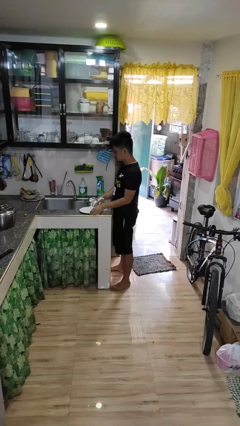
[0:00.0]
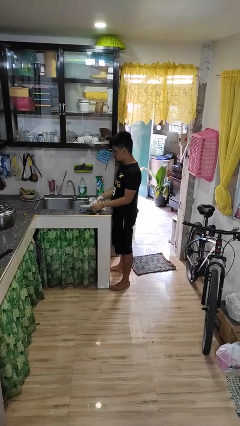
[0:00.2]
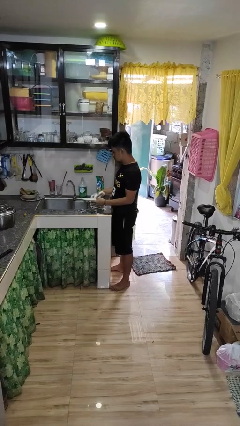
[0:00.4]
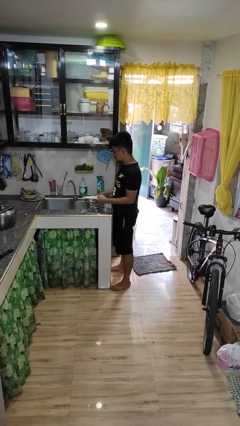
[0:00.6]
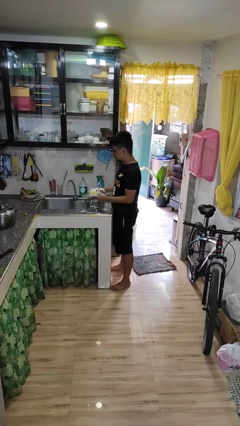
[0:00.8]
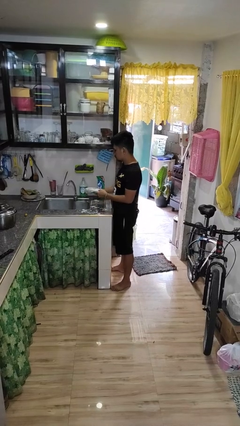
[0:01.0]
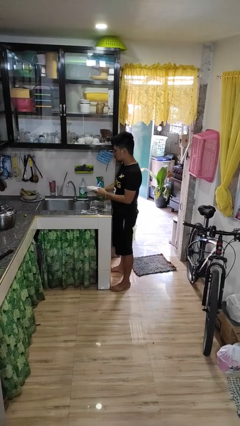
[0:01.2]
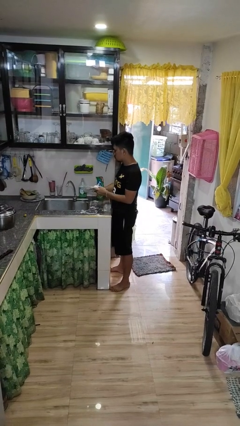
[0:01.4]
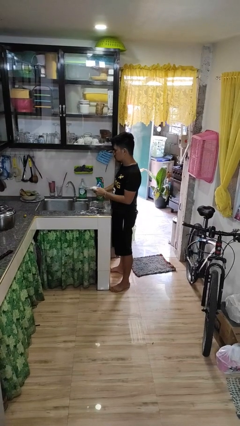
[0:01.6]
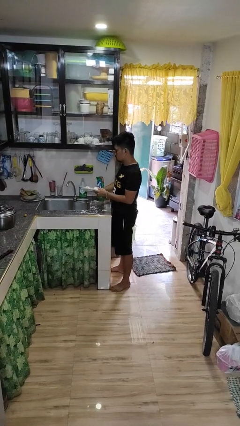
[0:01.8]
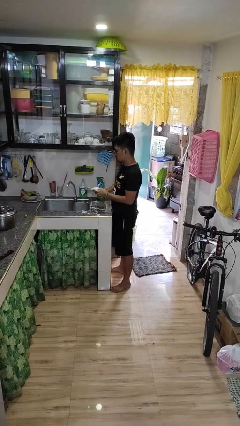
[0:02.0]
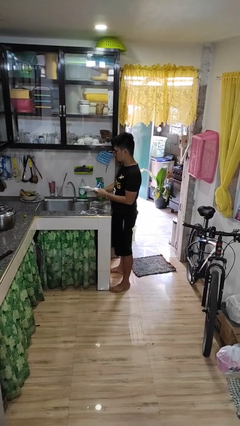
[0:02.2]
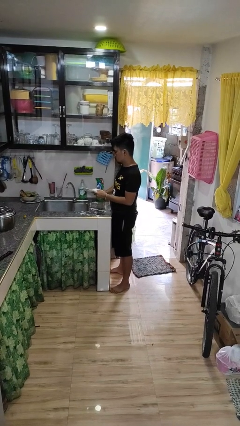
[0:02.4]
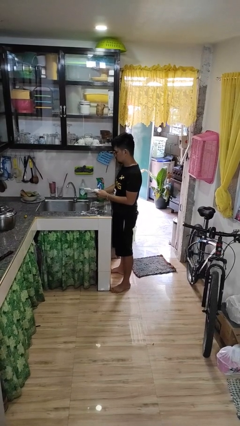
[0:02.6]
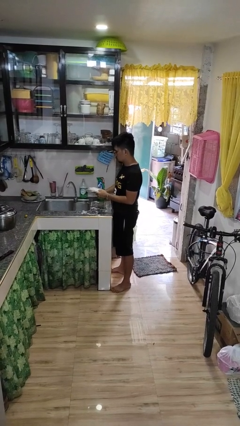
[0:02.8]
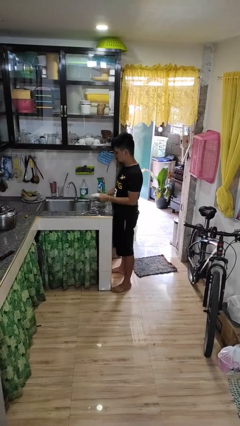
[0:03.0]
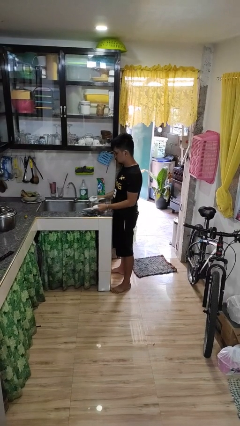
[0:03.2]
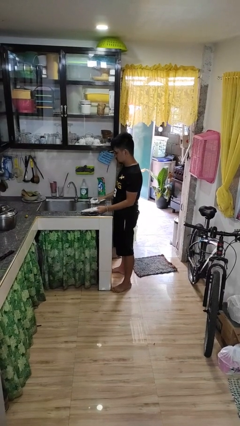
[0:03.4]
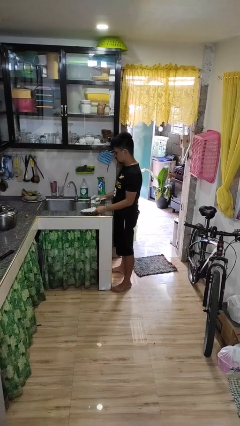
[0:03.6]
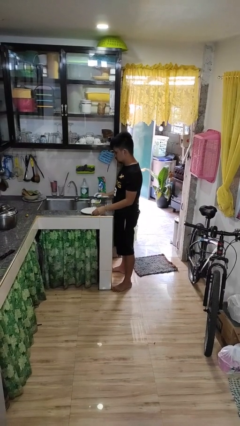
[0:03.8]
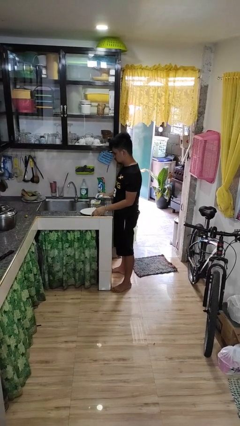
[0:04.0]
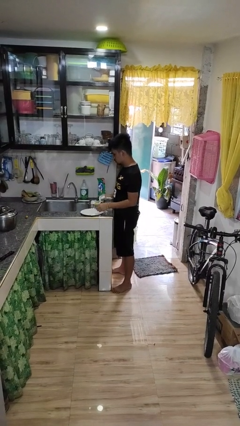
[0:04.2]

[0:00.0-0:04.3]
person washes dish

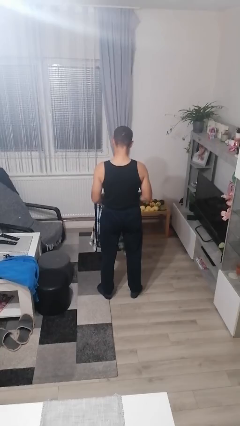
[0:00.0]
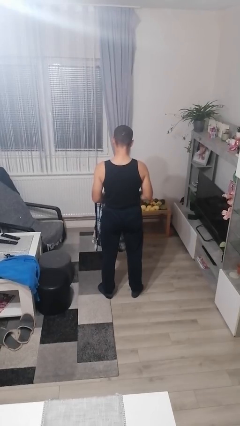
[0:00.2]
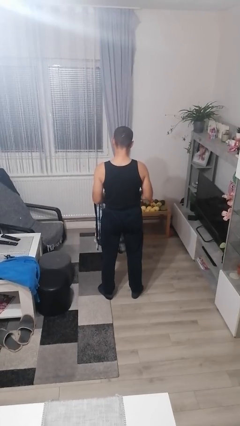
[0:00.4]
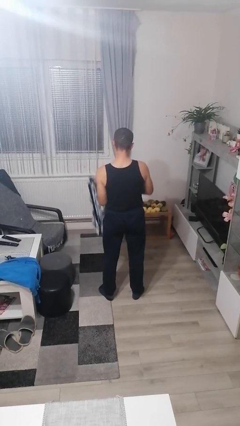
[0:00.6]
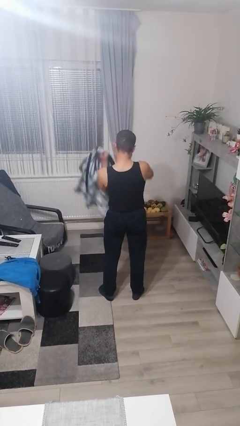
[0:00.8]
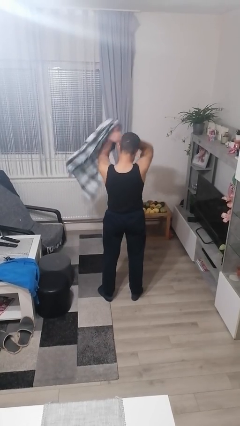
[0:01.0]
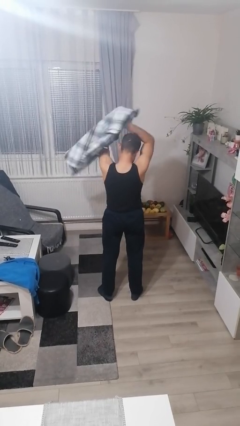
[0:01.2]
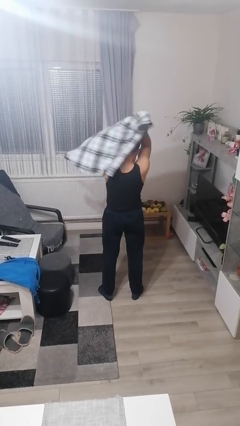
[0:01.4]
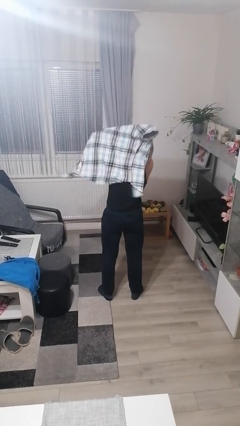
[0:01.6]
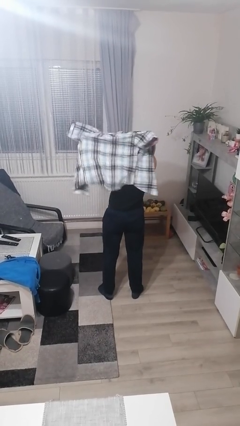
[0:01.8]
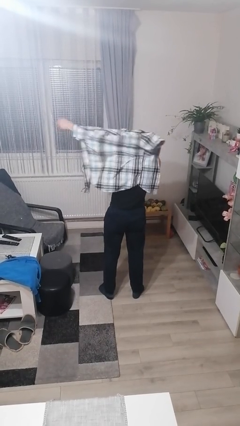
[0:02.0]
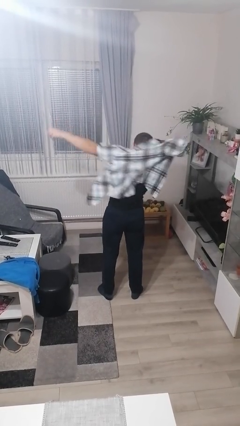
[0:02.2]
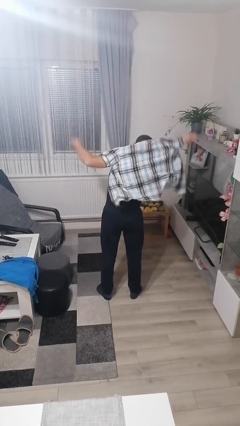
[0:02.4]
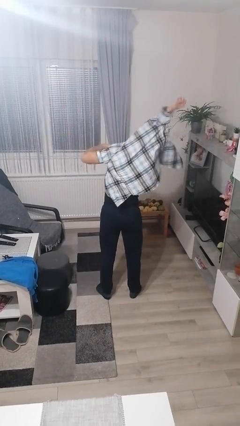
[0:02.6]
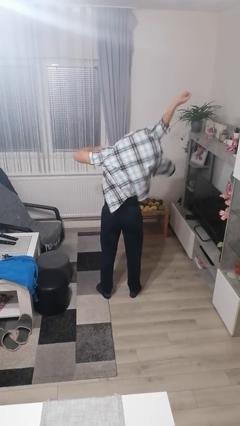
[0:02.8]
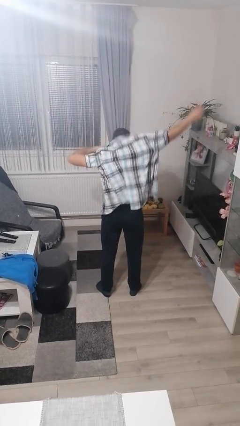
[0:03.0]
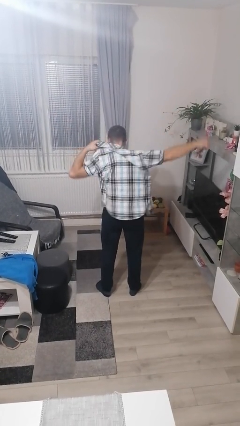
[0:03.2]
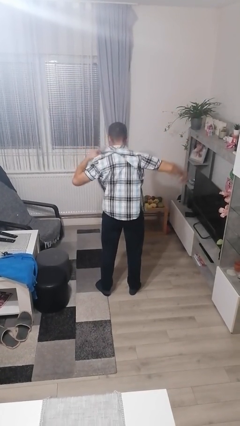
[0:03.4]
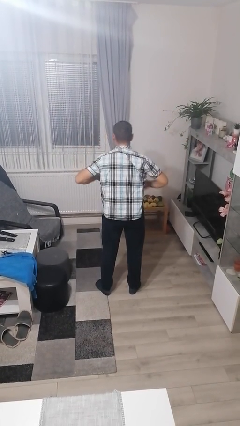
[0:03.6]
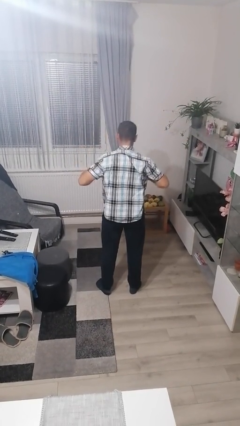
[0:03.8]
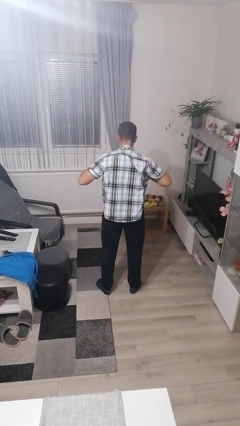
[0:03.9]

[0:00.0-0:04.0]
person puts on shirt

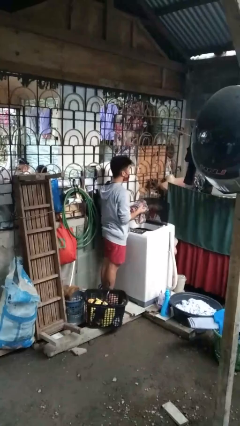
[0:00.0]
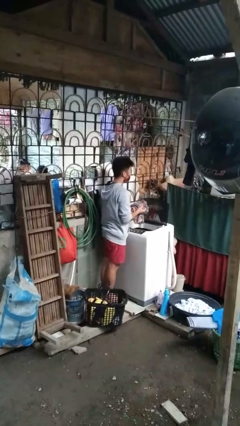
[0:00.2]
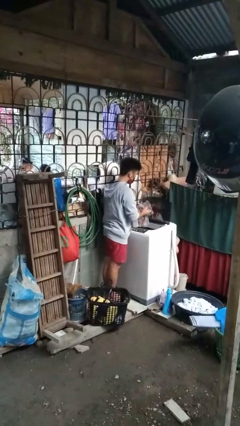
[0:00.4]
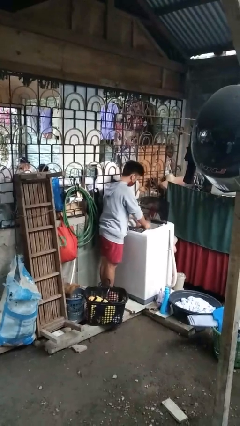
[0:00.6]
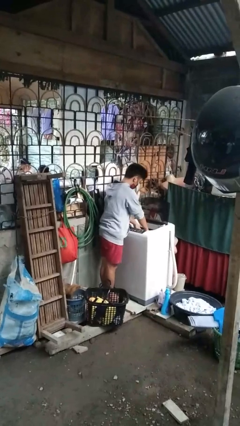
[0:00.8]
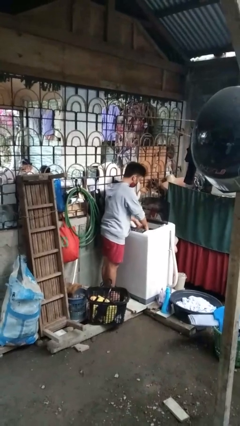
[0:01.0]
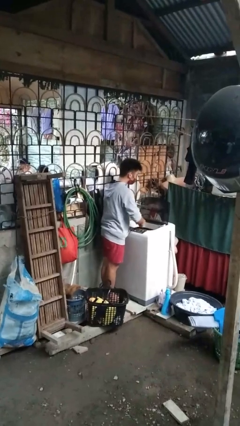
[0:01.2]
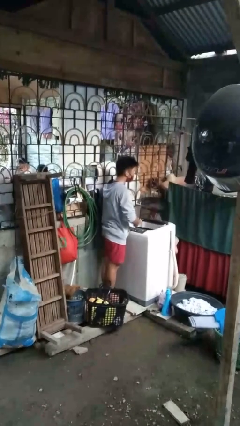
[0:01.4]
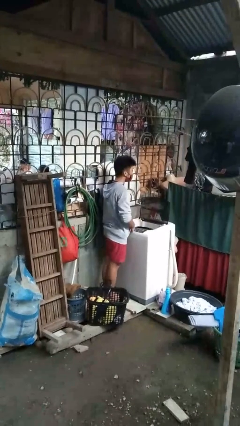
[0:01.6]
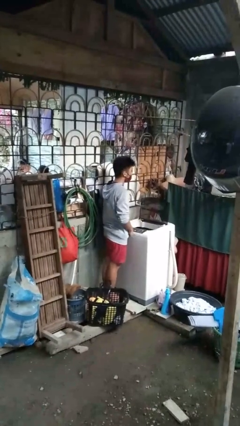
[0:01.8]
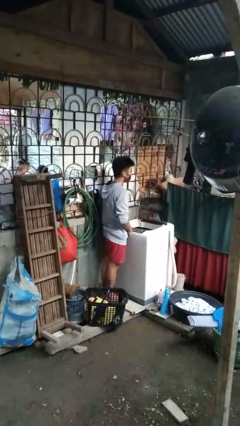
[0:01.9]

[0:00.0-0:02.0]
person loads dryer

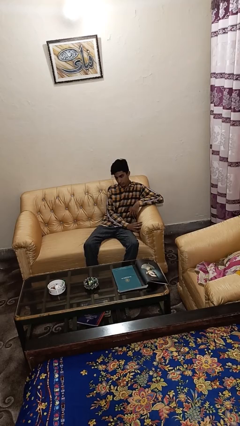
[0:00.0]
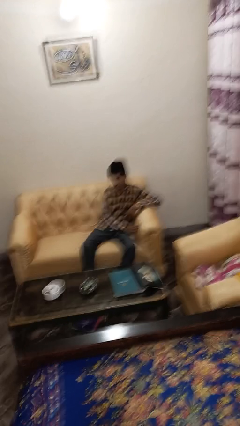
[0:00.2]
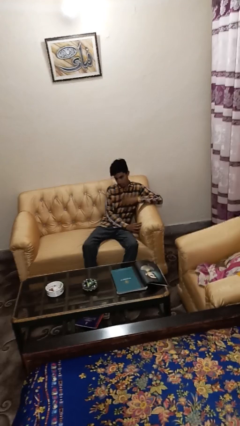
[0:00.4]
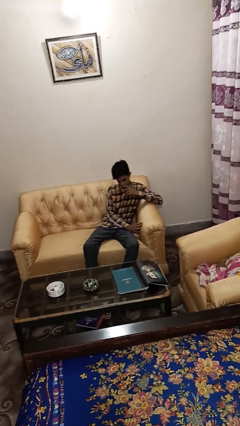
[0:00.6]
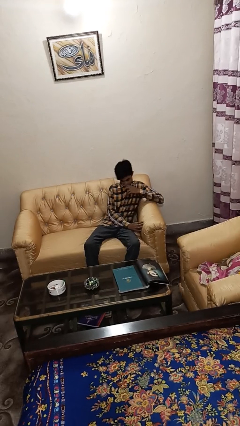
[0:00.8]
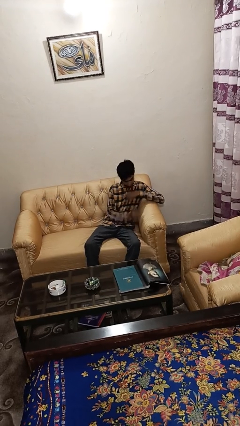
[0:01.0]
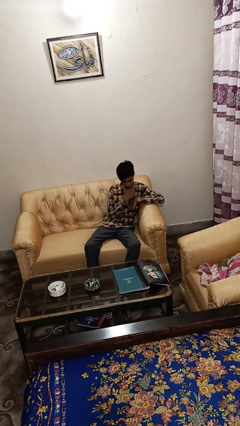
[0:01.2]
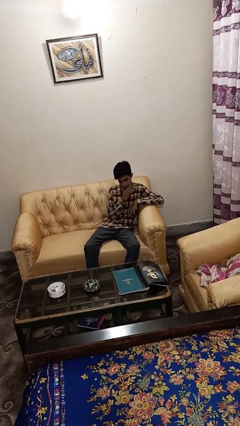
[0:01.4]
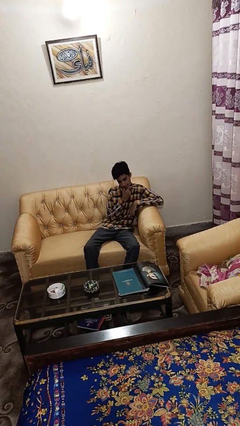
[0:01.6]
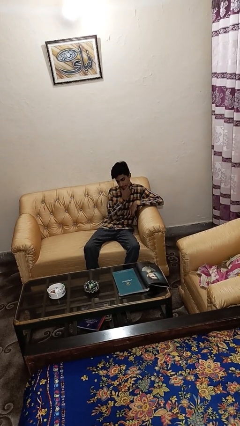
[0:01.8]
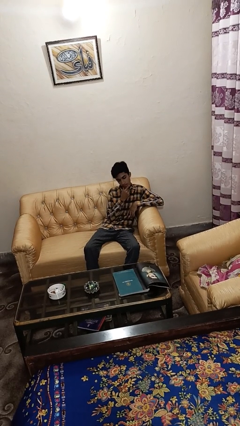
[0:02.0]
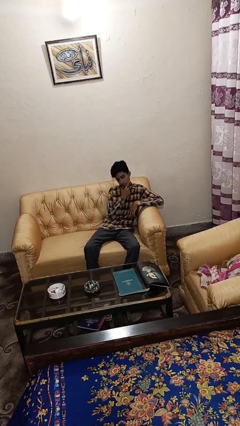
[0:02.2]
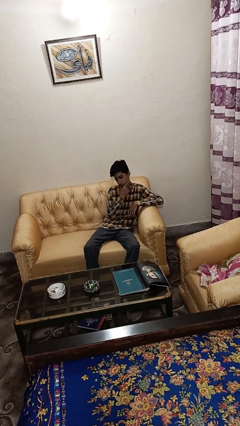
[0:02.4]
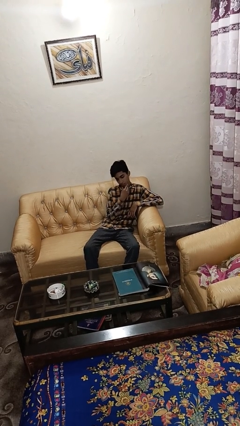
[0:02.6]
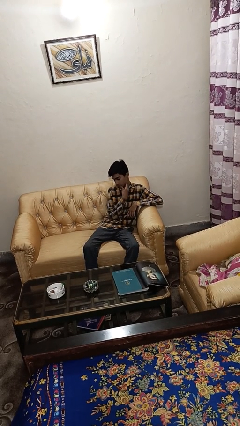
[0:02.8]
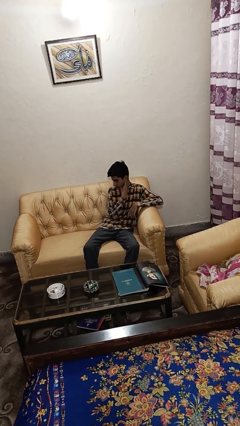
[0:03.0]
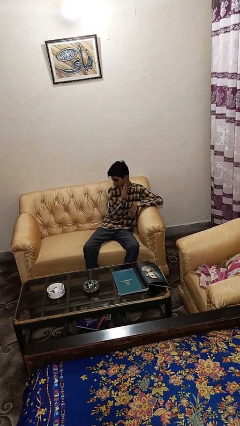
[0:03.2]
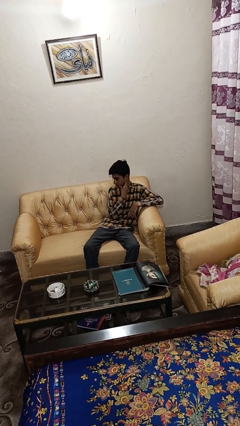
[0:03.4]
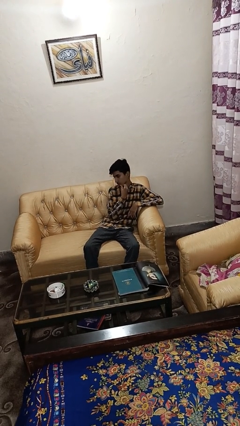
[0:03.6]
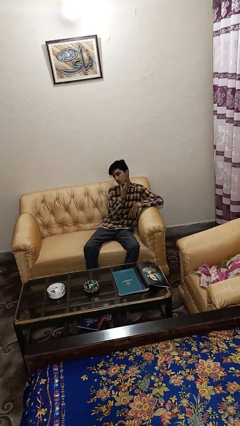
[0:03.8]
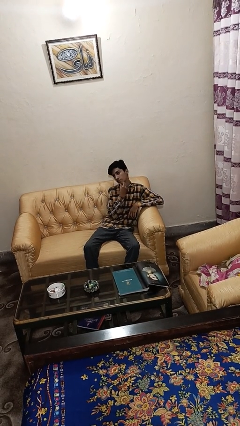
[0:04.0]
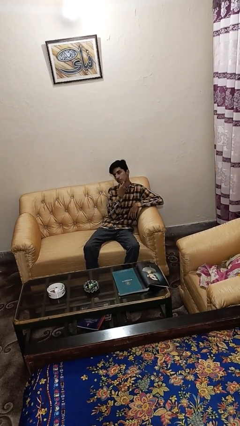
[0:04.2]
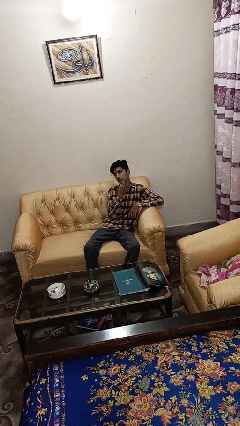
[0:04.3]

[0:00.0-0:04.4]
person strokes chin

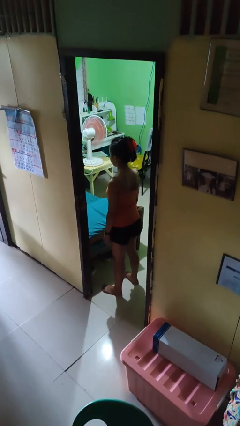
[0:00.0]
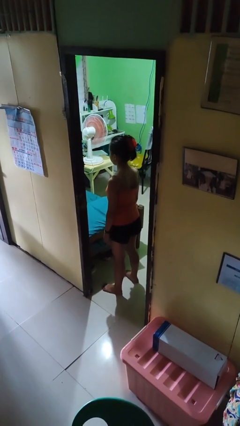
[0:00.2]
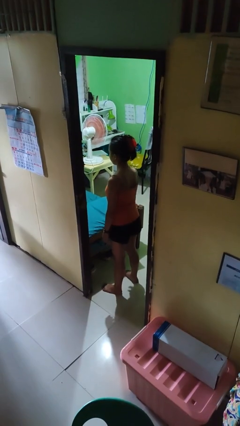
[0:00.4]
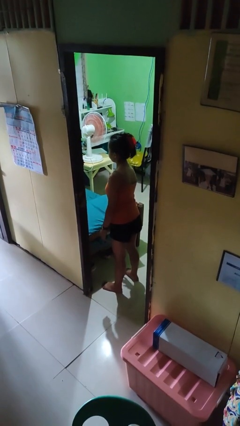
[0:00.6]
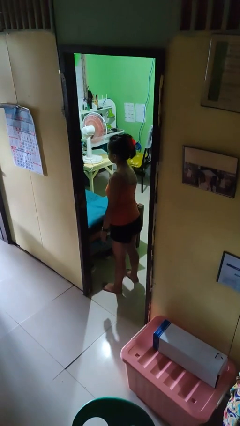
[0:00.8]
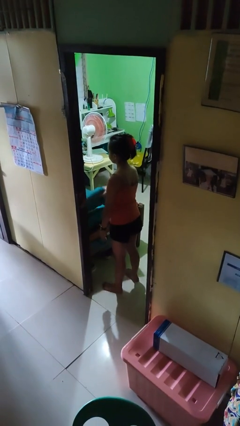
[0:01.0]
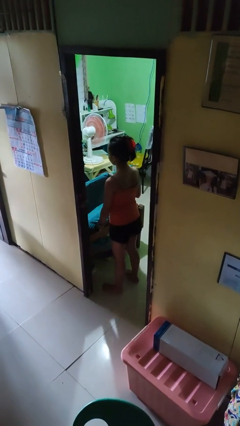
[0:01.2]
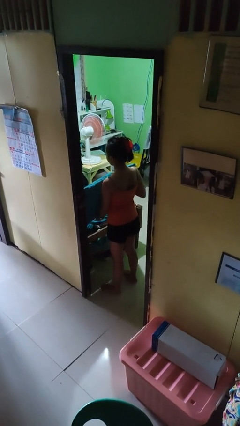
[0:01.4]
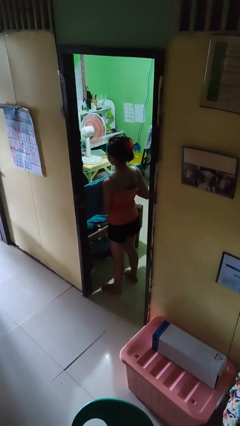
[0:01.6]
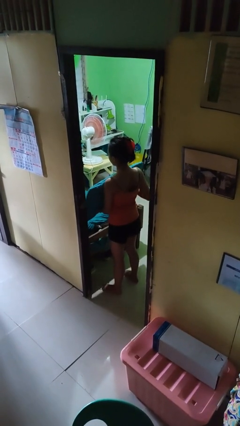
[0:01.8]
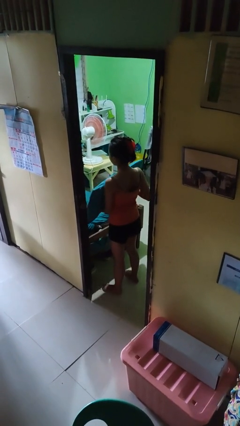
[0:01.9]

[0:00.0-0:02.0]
person picks up object from bed

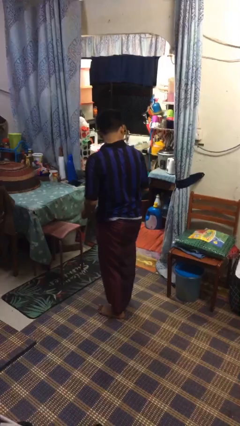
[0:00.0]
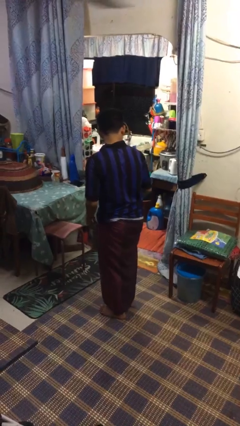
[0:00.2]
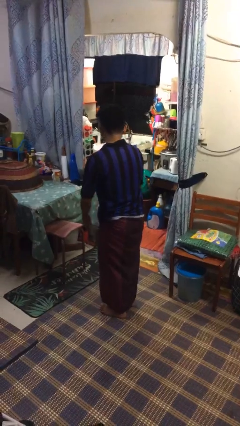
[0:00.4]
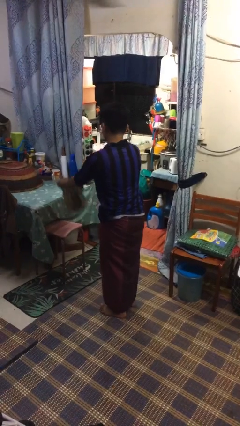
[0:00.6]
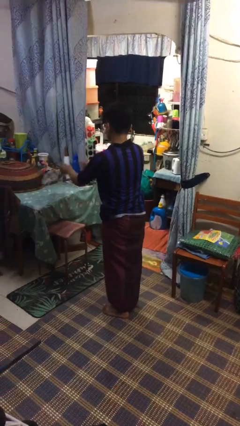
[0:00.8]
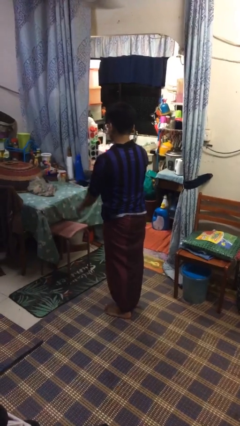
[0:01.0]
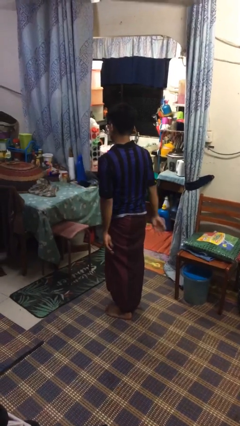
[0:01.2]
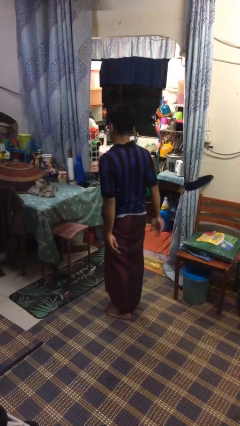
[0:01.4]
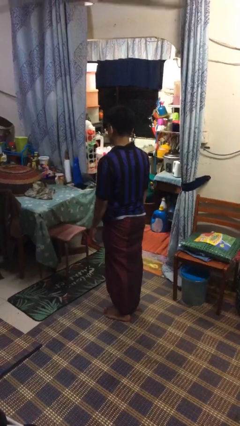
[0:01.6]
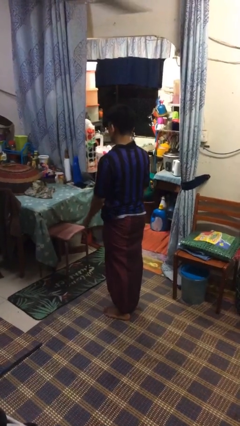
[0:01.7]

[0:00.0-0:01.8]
person throws object on table
